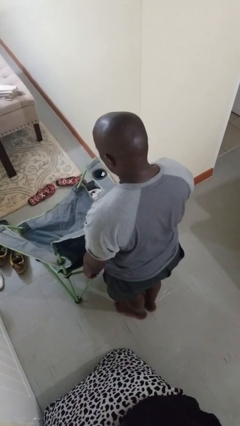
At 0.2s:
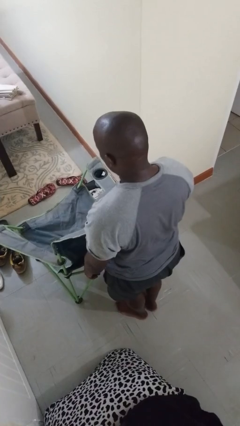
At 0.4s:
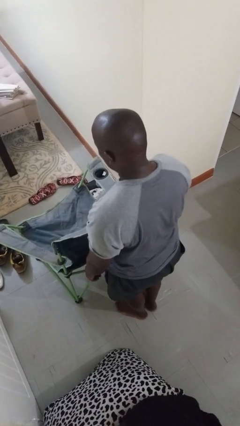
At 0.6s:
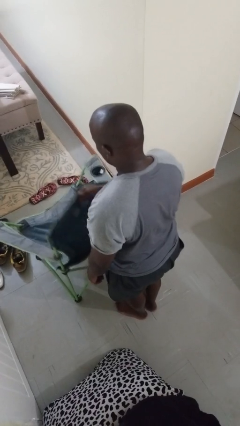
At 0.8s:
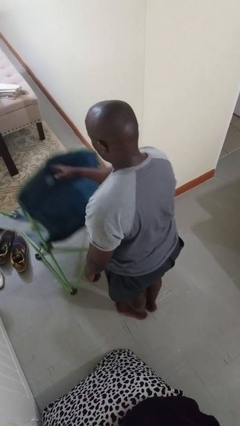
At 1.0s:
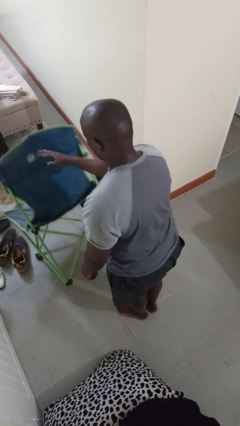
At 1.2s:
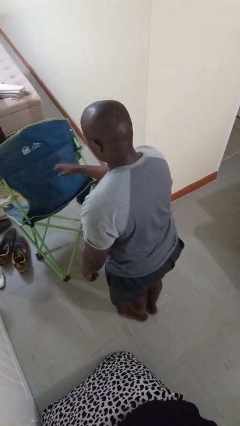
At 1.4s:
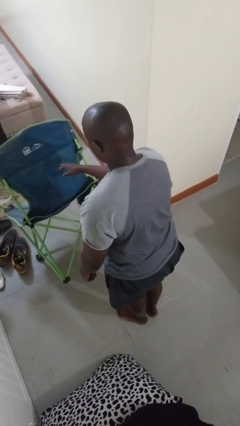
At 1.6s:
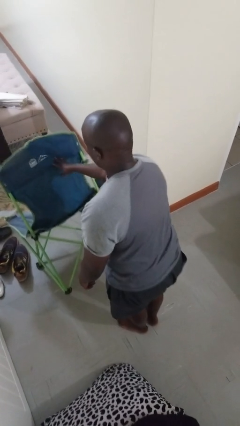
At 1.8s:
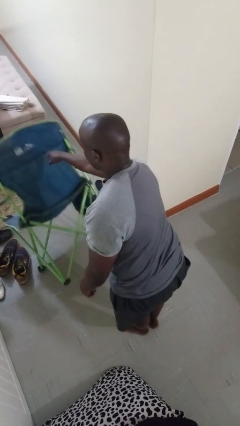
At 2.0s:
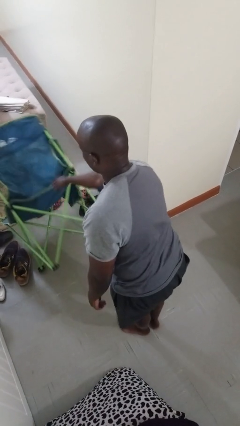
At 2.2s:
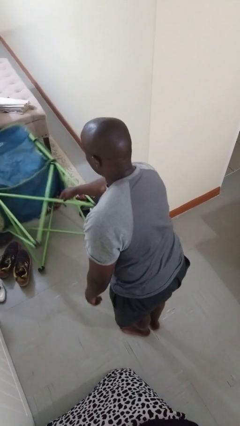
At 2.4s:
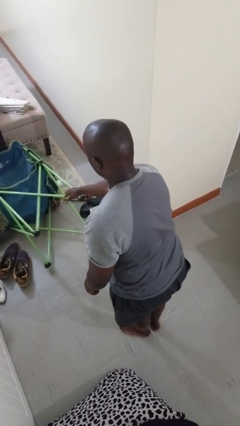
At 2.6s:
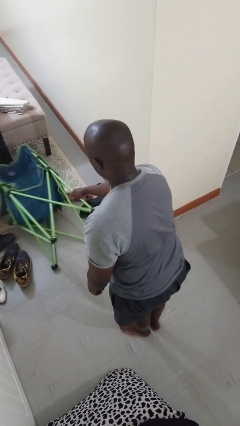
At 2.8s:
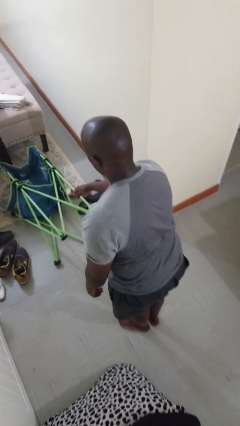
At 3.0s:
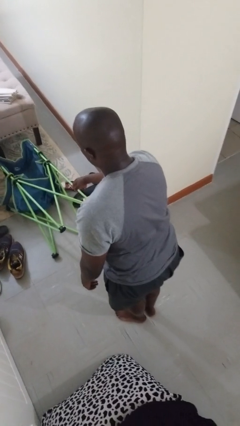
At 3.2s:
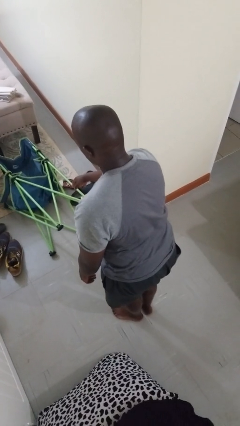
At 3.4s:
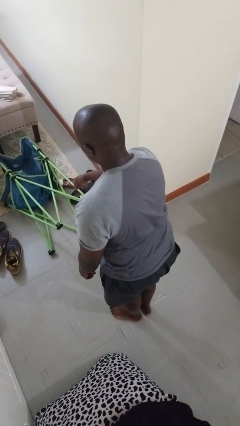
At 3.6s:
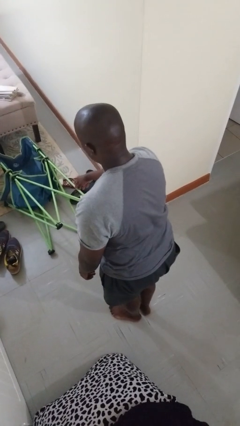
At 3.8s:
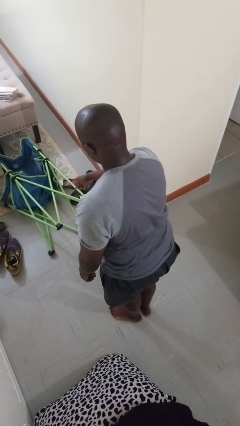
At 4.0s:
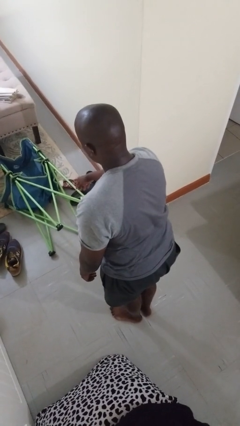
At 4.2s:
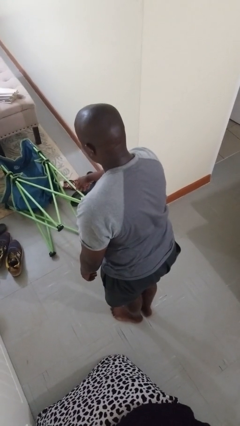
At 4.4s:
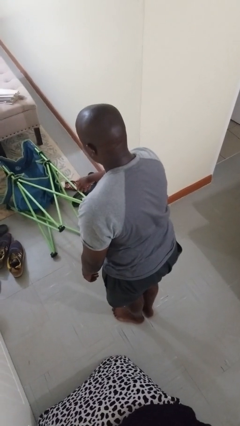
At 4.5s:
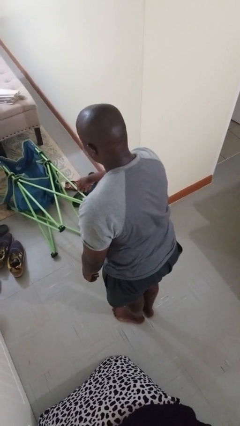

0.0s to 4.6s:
person knocks over furniture

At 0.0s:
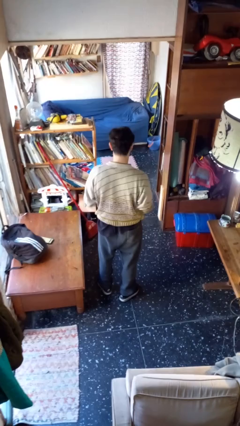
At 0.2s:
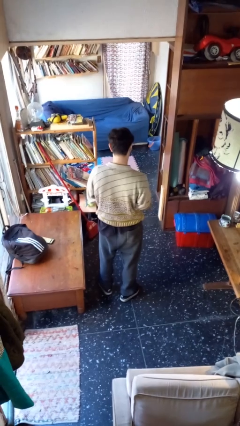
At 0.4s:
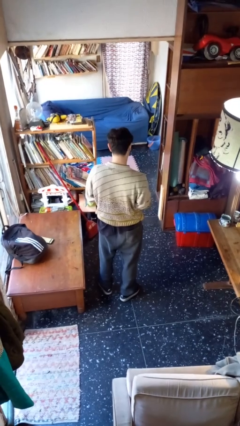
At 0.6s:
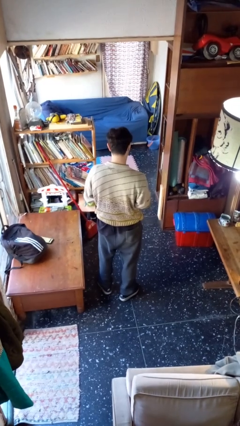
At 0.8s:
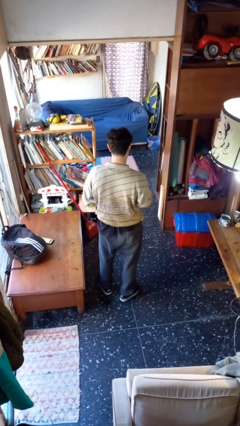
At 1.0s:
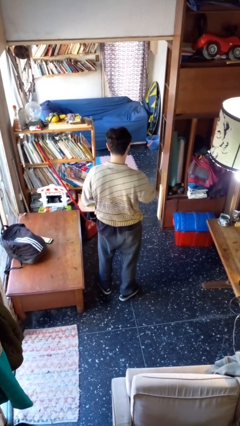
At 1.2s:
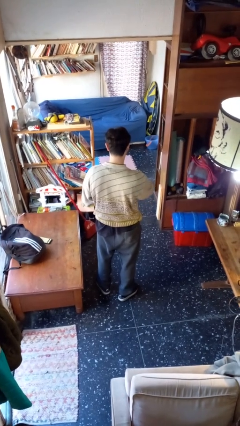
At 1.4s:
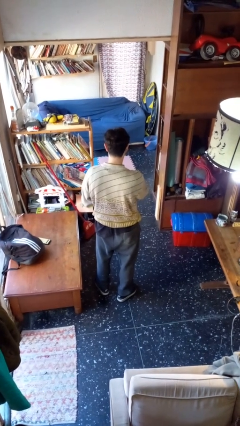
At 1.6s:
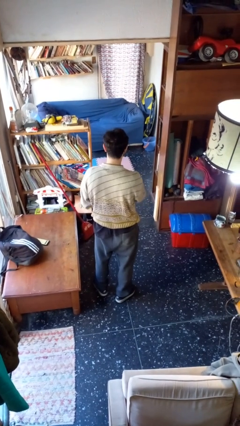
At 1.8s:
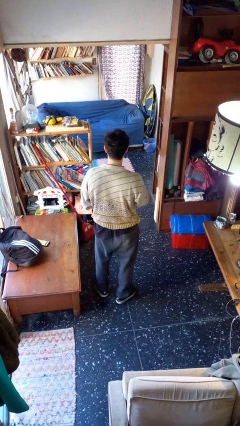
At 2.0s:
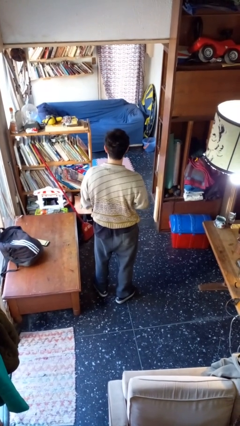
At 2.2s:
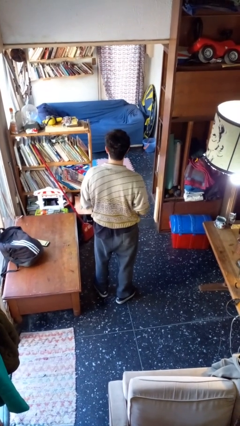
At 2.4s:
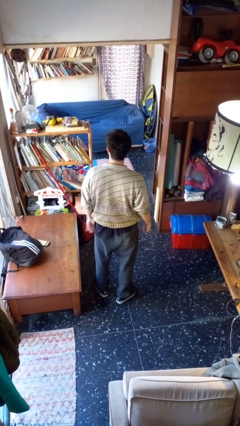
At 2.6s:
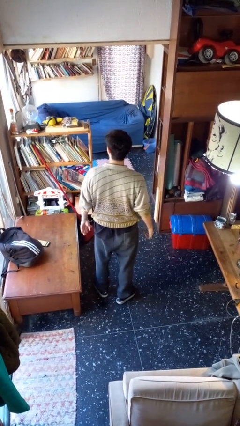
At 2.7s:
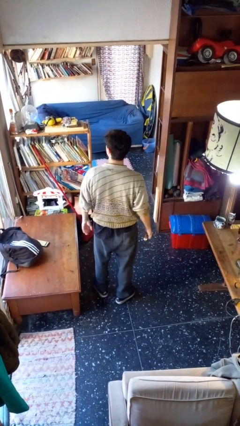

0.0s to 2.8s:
person takes off wristwatch

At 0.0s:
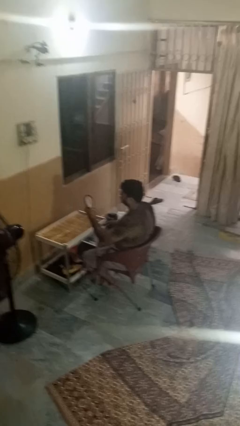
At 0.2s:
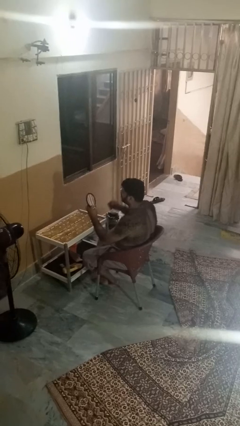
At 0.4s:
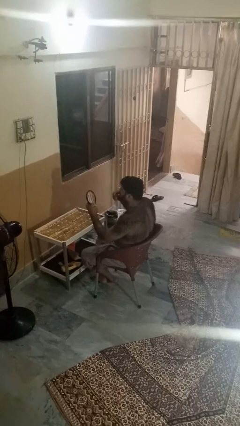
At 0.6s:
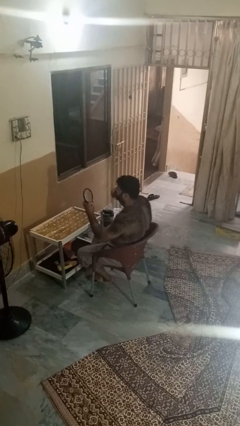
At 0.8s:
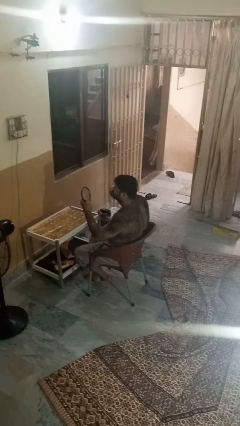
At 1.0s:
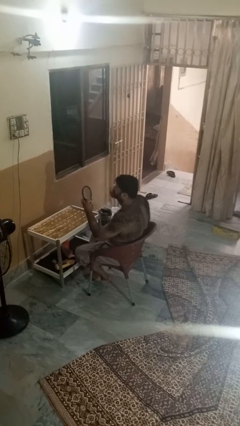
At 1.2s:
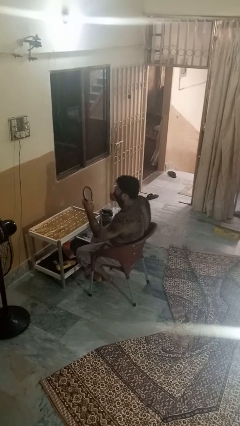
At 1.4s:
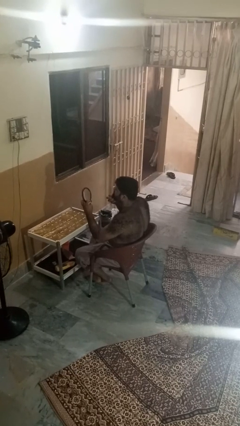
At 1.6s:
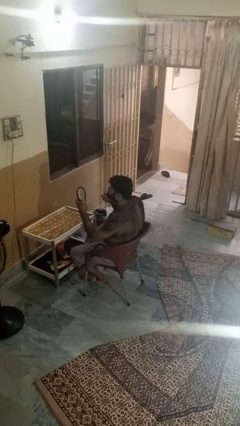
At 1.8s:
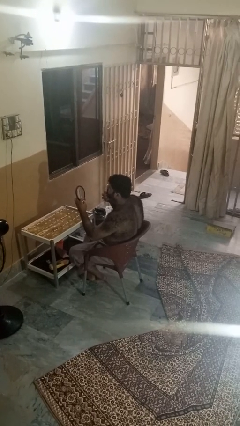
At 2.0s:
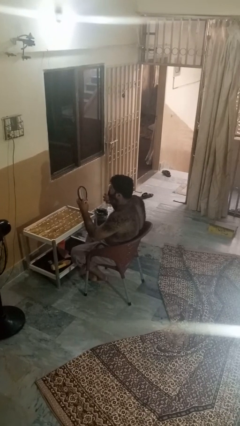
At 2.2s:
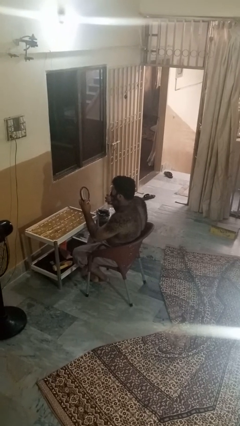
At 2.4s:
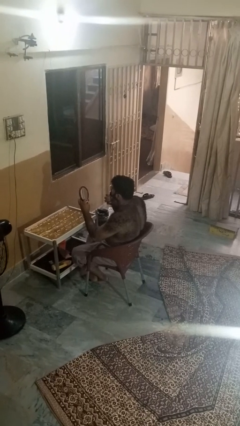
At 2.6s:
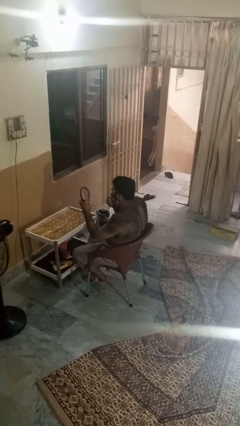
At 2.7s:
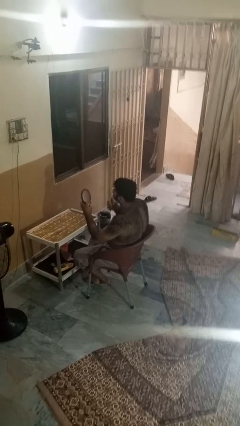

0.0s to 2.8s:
person applies lip makeup

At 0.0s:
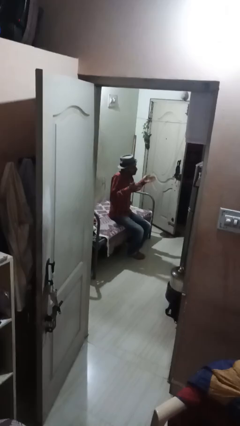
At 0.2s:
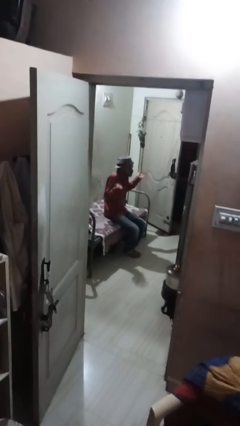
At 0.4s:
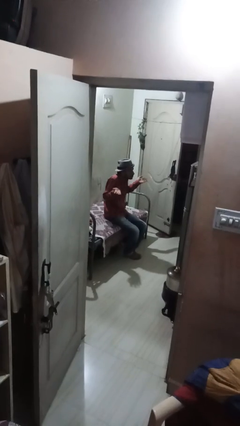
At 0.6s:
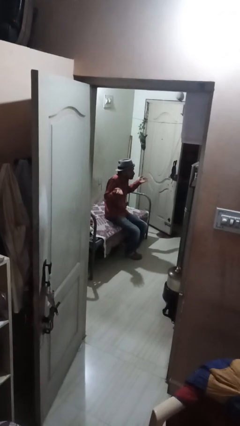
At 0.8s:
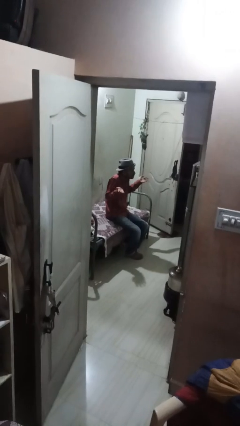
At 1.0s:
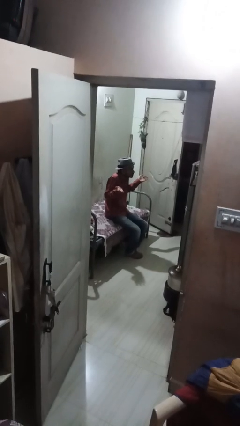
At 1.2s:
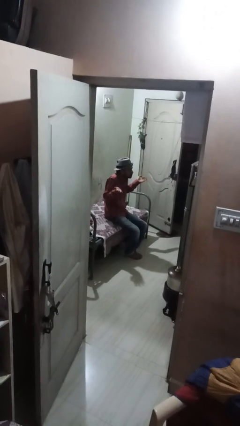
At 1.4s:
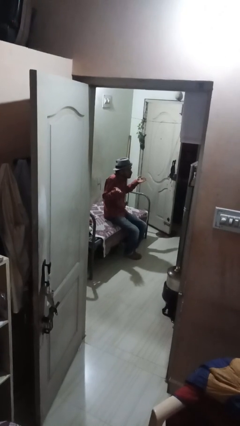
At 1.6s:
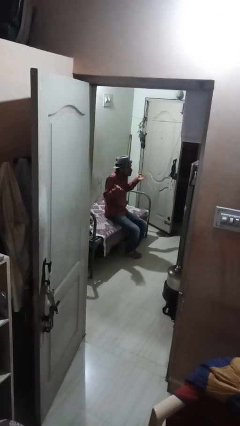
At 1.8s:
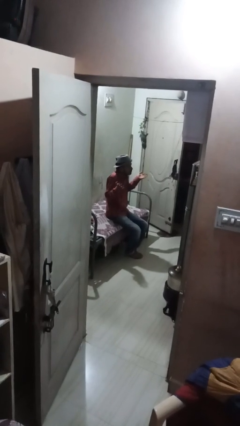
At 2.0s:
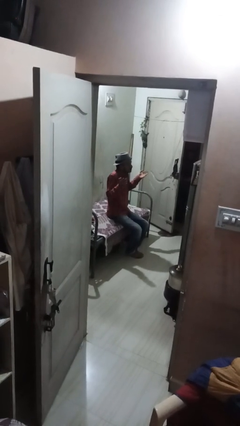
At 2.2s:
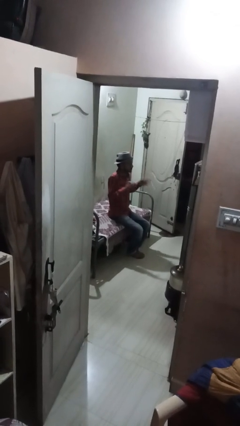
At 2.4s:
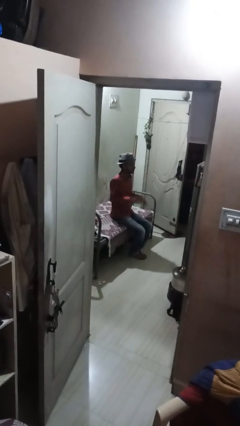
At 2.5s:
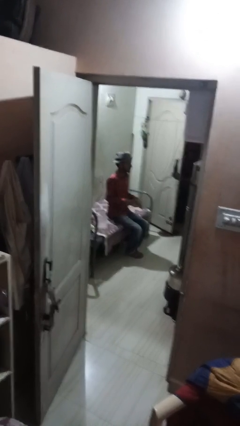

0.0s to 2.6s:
person shrugs

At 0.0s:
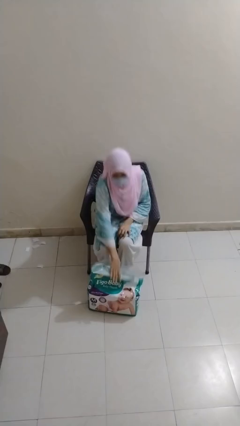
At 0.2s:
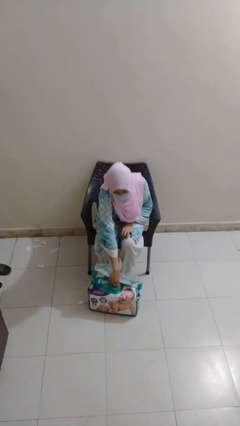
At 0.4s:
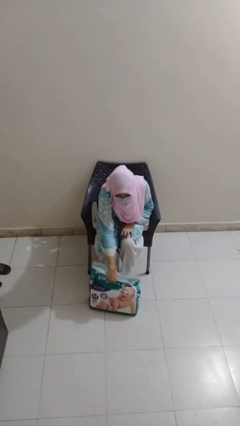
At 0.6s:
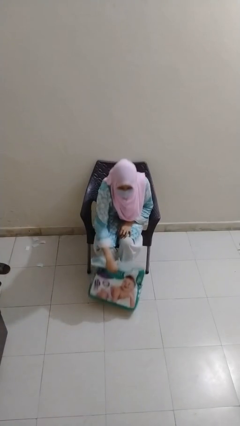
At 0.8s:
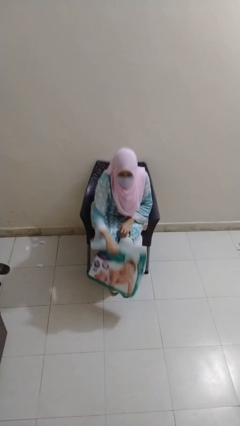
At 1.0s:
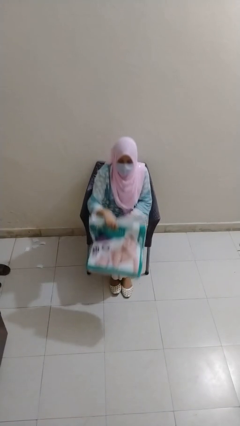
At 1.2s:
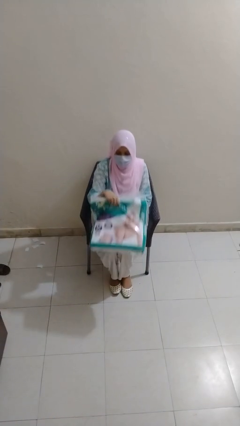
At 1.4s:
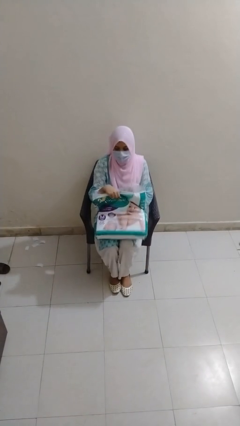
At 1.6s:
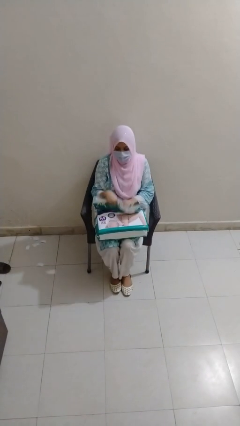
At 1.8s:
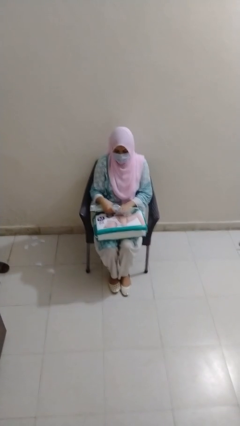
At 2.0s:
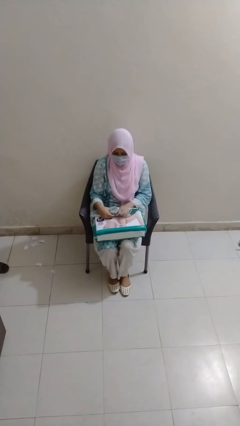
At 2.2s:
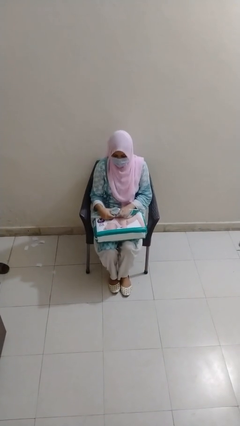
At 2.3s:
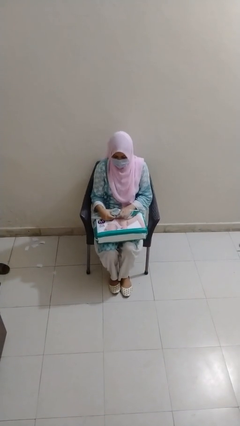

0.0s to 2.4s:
person picks up object from floor

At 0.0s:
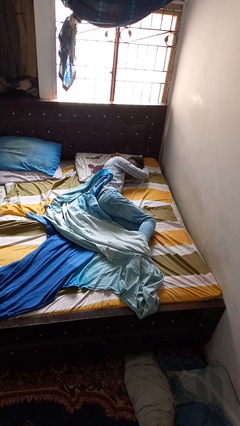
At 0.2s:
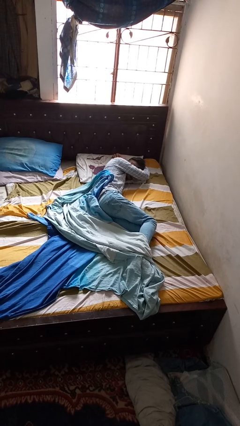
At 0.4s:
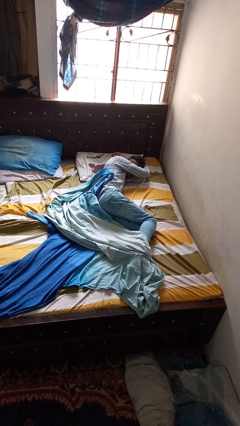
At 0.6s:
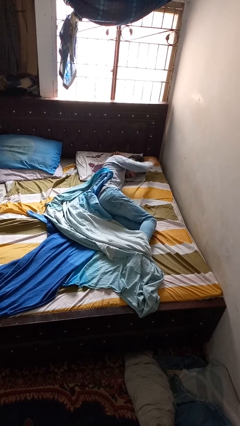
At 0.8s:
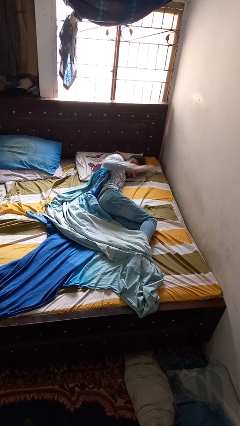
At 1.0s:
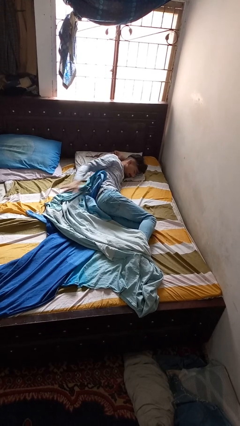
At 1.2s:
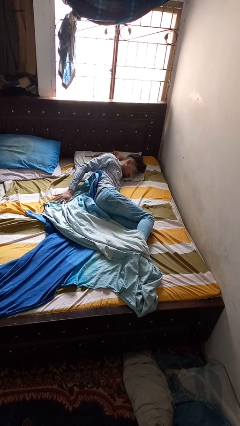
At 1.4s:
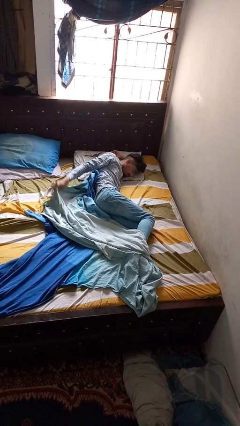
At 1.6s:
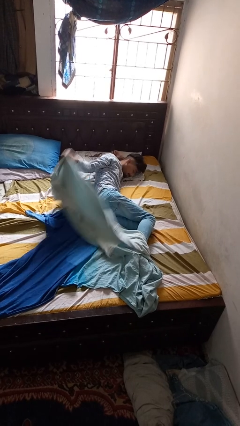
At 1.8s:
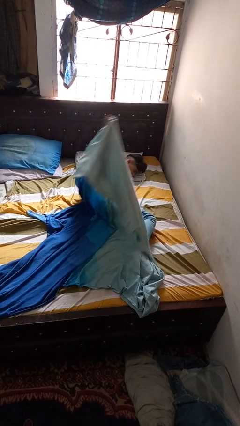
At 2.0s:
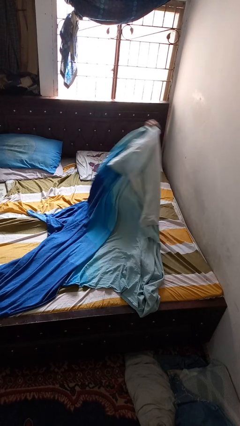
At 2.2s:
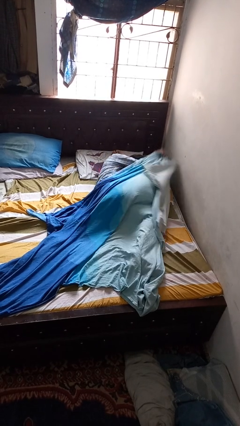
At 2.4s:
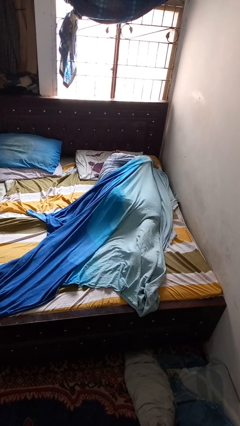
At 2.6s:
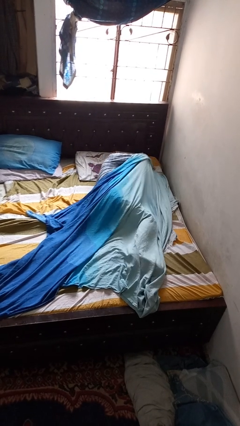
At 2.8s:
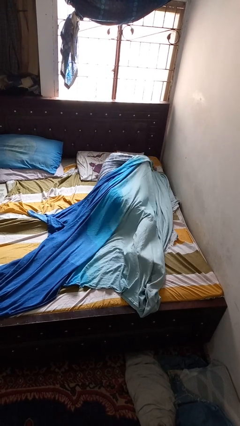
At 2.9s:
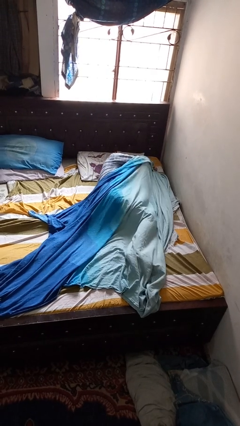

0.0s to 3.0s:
person covers with blanket
